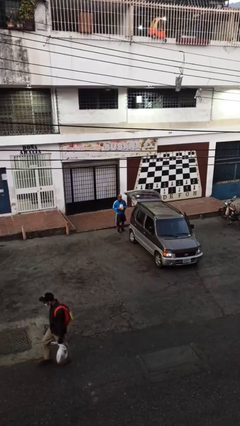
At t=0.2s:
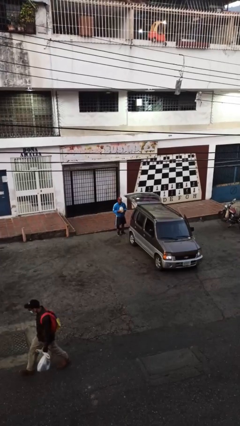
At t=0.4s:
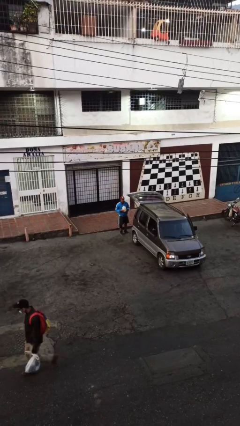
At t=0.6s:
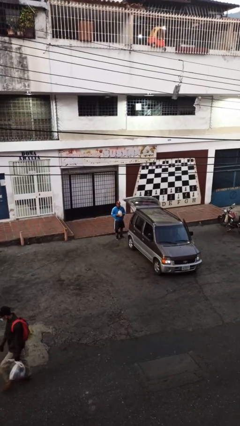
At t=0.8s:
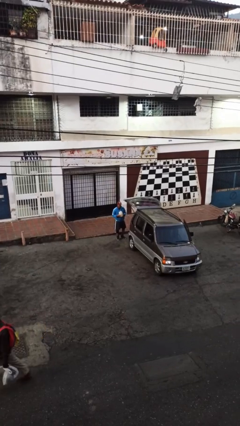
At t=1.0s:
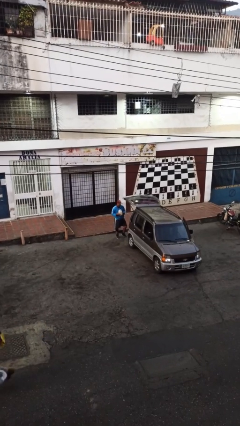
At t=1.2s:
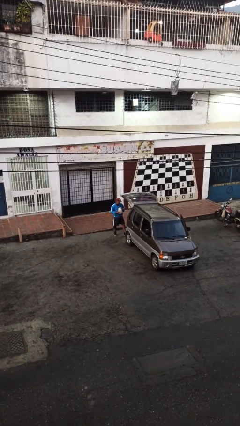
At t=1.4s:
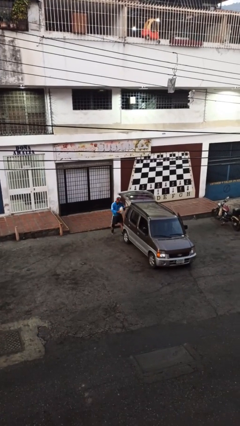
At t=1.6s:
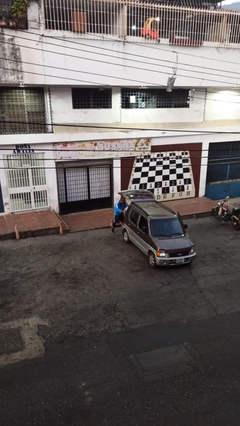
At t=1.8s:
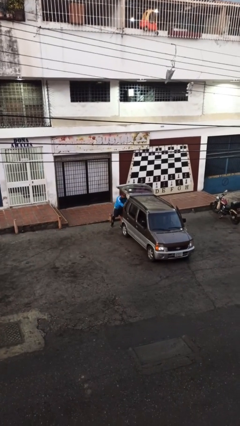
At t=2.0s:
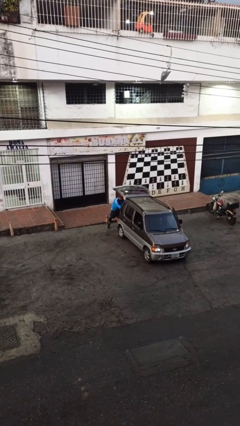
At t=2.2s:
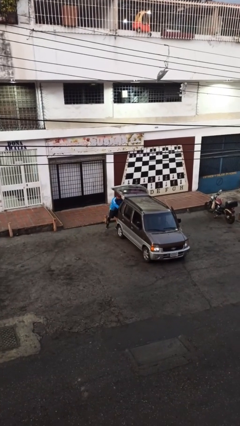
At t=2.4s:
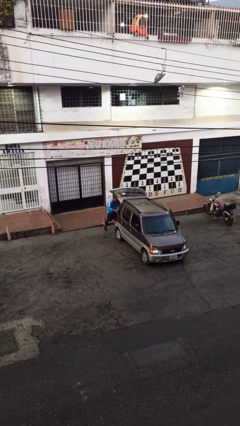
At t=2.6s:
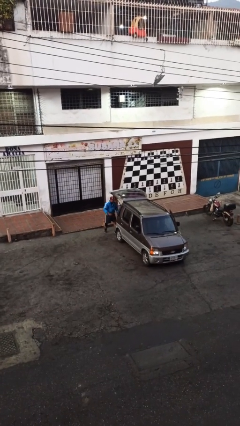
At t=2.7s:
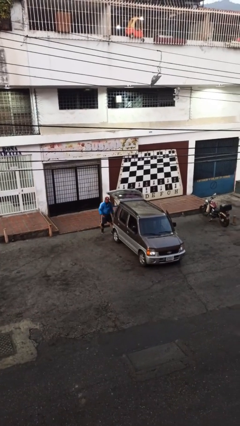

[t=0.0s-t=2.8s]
person loads car

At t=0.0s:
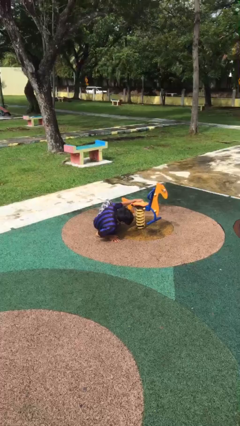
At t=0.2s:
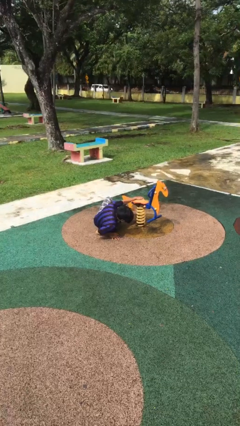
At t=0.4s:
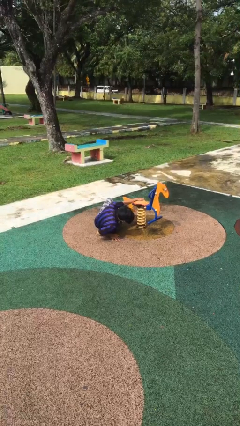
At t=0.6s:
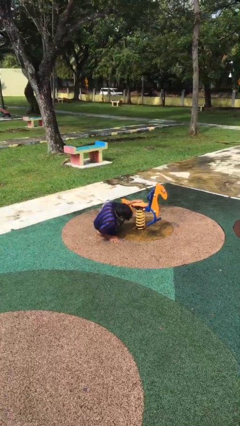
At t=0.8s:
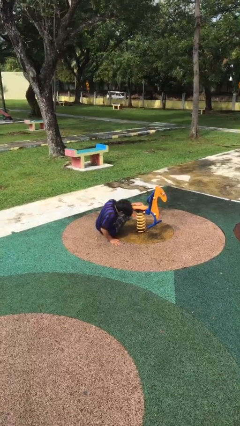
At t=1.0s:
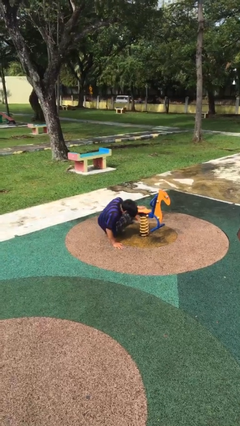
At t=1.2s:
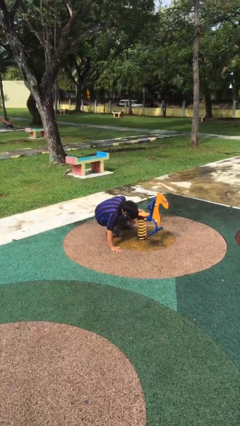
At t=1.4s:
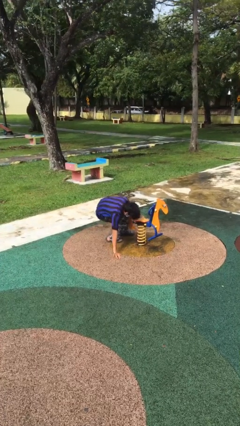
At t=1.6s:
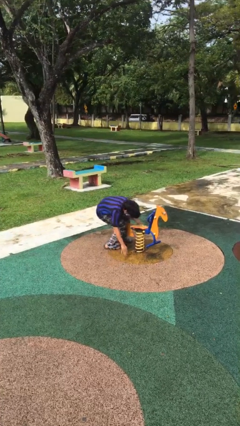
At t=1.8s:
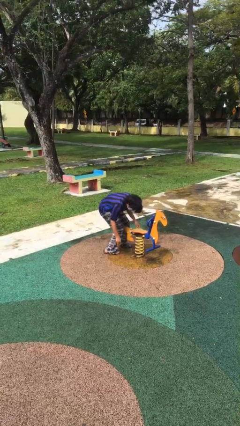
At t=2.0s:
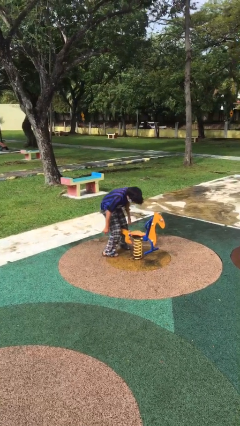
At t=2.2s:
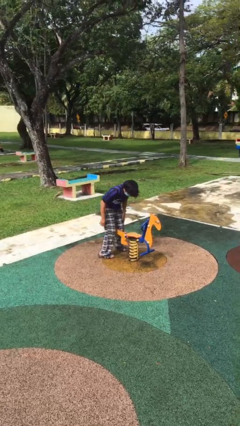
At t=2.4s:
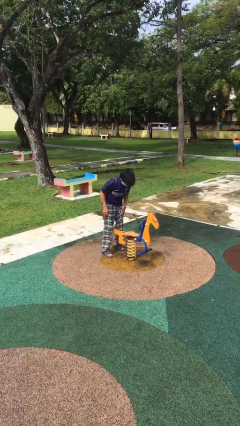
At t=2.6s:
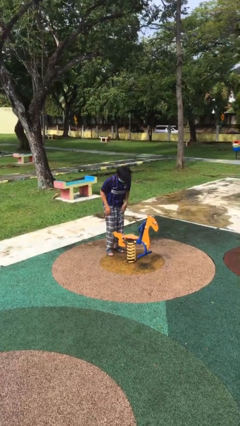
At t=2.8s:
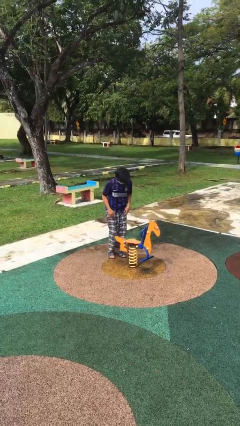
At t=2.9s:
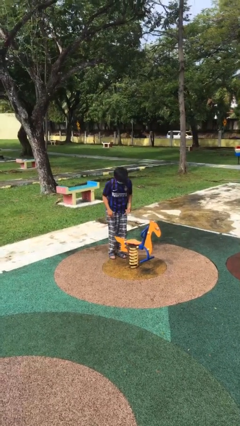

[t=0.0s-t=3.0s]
person stands up from floor

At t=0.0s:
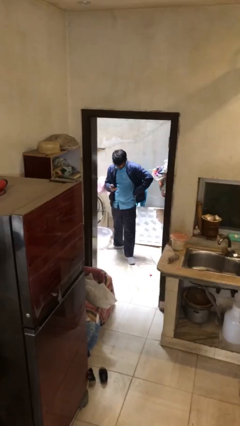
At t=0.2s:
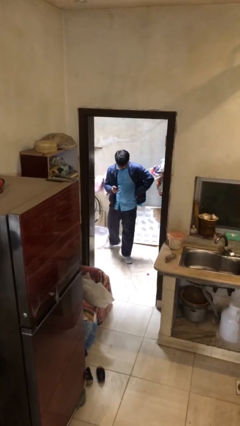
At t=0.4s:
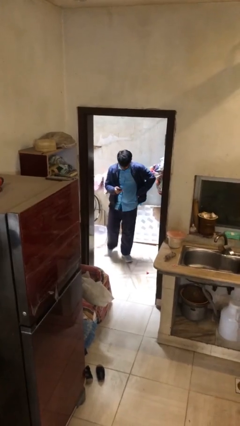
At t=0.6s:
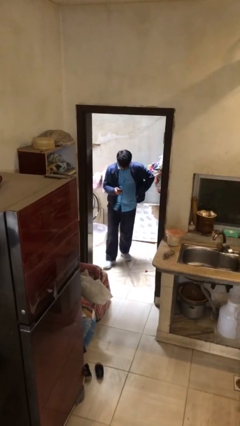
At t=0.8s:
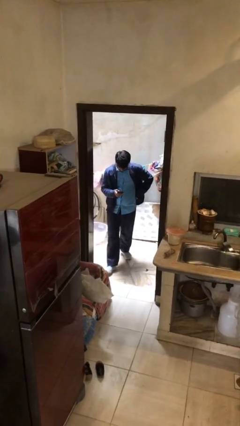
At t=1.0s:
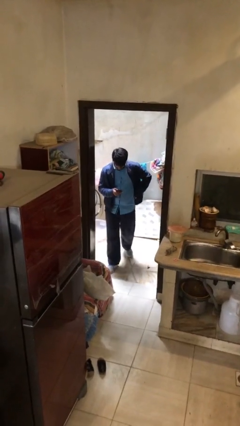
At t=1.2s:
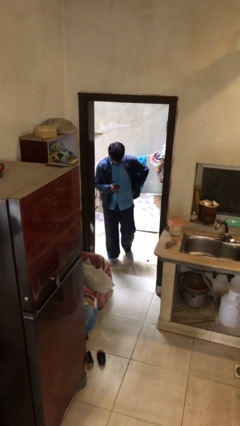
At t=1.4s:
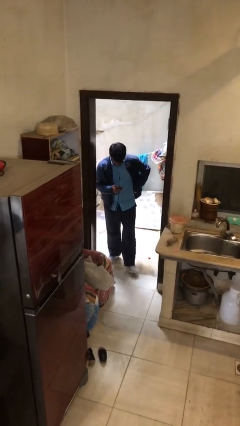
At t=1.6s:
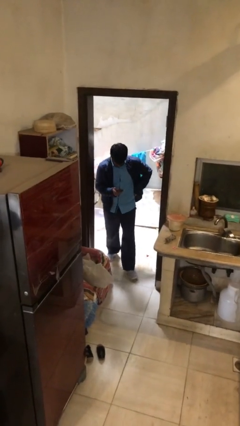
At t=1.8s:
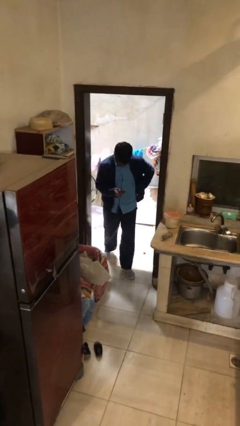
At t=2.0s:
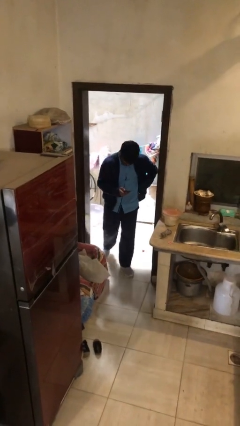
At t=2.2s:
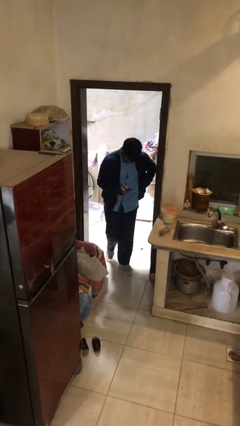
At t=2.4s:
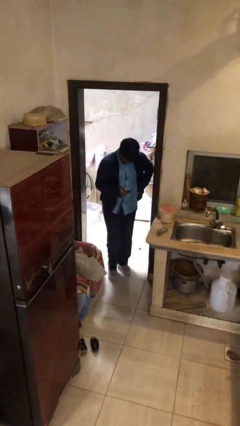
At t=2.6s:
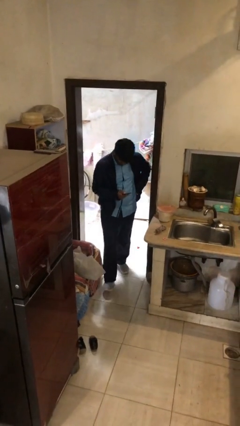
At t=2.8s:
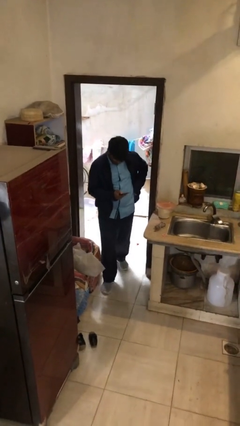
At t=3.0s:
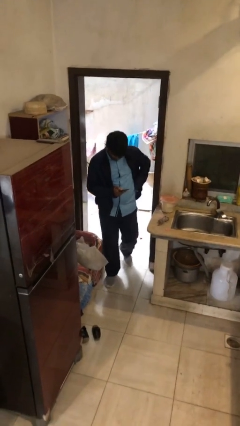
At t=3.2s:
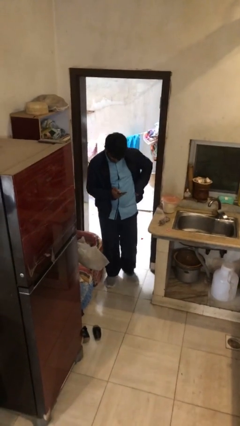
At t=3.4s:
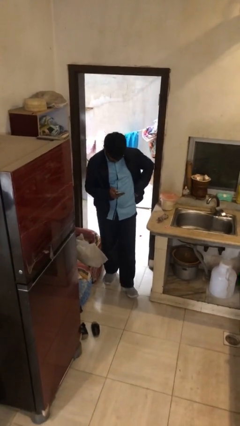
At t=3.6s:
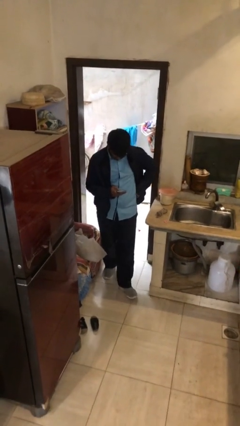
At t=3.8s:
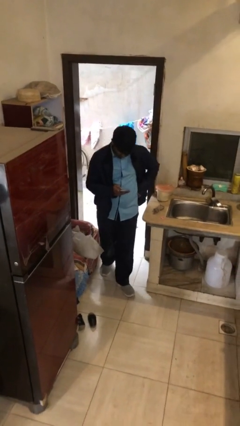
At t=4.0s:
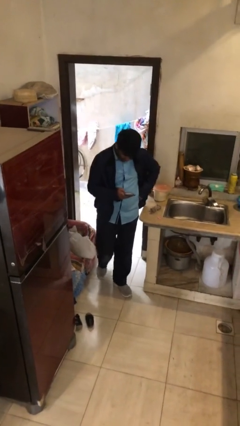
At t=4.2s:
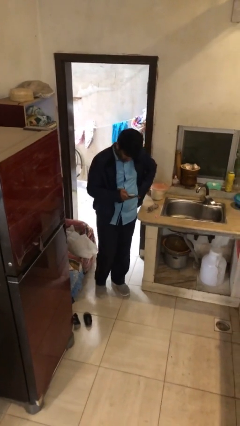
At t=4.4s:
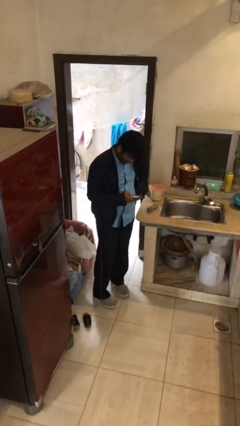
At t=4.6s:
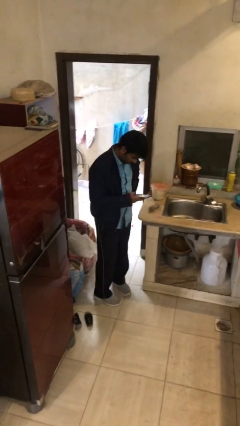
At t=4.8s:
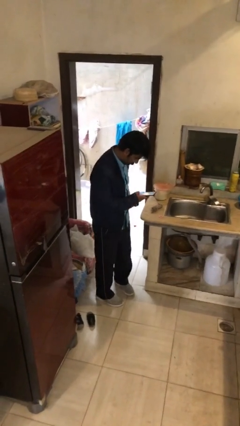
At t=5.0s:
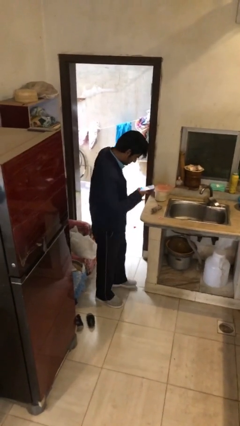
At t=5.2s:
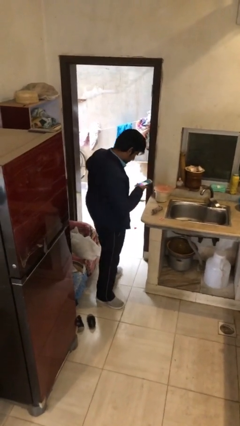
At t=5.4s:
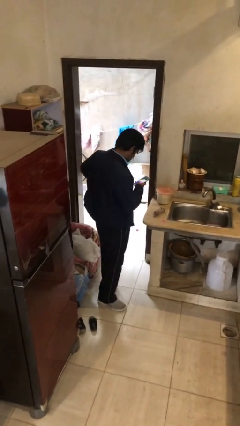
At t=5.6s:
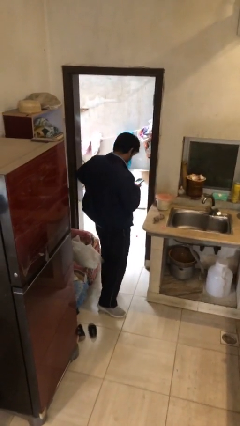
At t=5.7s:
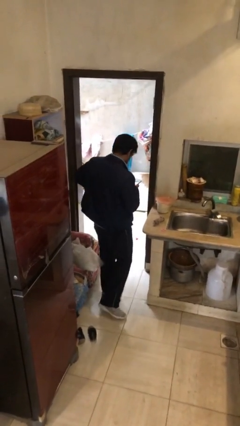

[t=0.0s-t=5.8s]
person enters scene through structure

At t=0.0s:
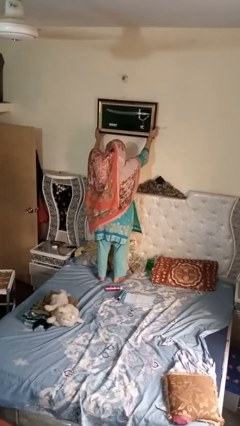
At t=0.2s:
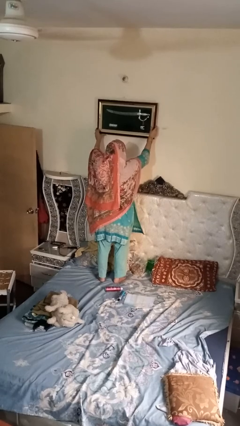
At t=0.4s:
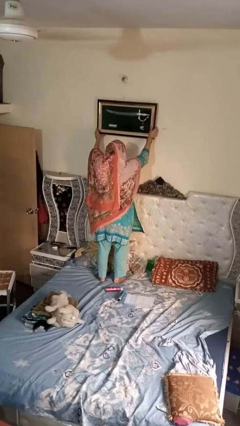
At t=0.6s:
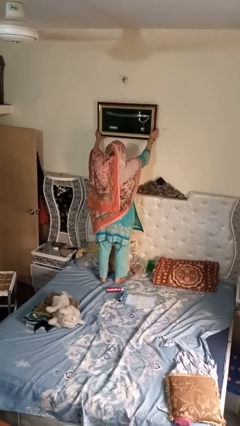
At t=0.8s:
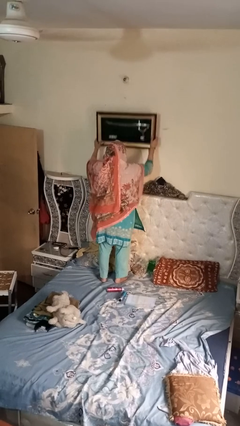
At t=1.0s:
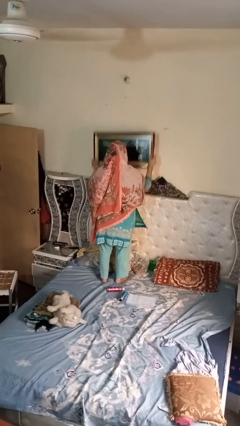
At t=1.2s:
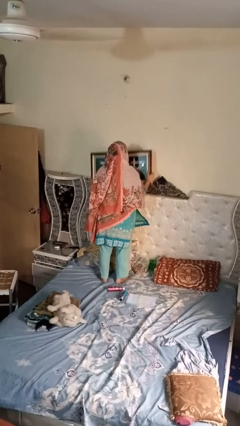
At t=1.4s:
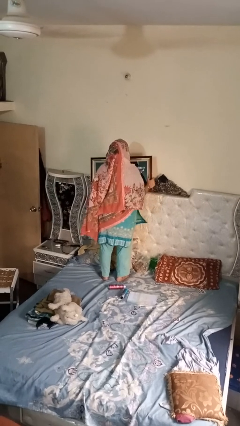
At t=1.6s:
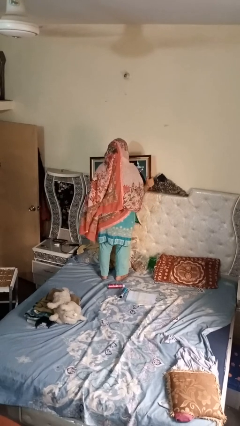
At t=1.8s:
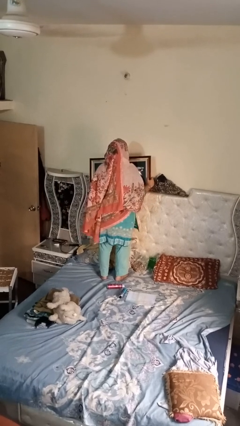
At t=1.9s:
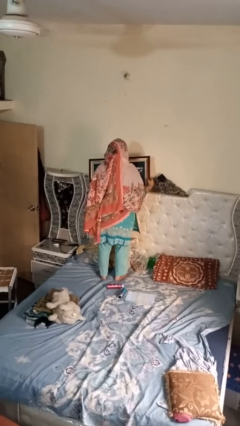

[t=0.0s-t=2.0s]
person puts up picture frame

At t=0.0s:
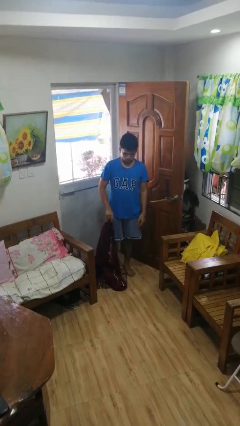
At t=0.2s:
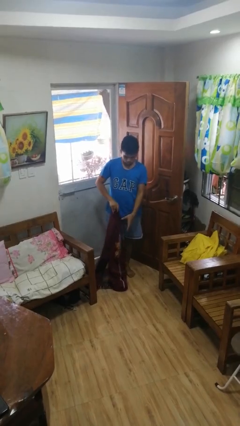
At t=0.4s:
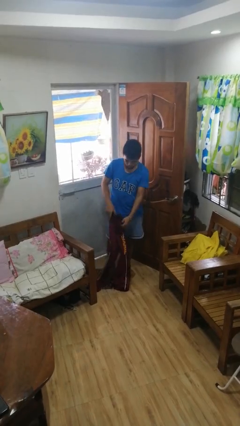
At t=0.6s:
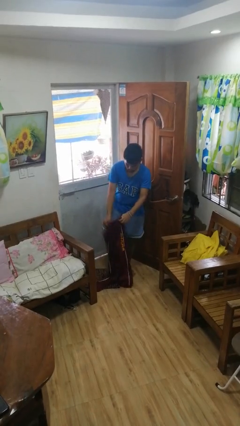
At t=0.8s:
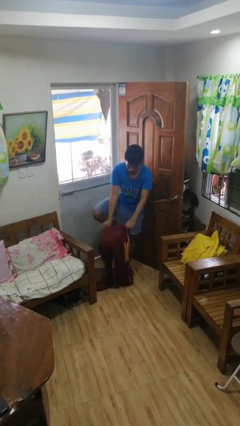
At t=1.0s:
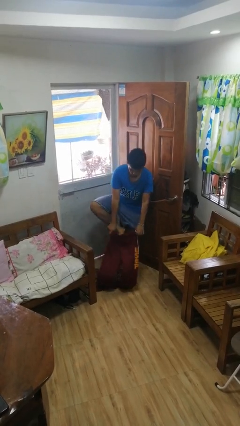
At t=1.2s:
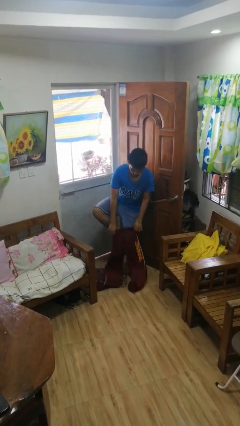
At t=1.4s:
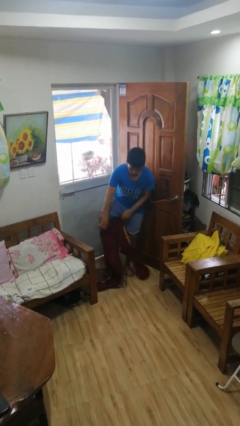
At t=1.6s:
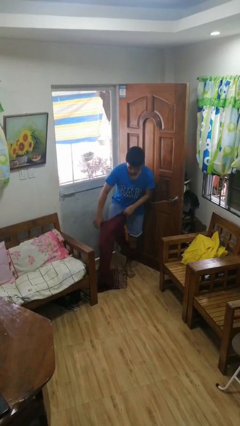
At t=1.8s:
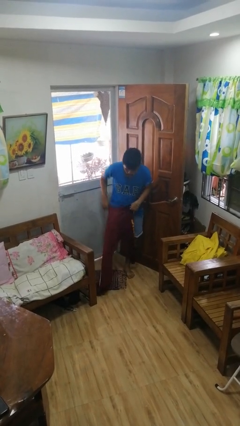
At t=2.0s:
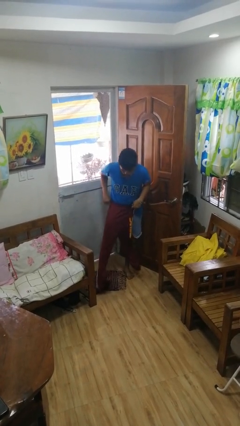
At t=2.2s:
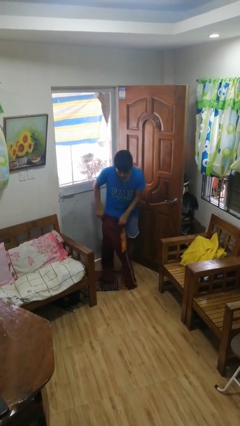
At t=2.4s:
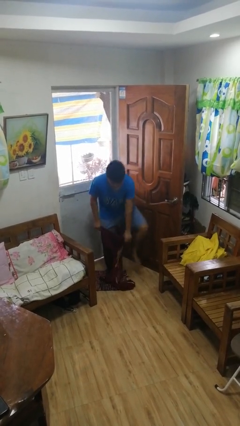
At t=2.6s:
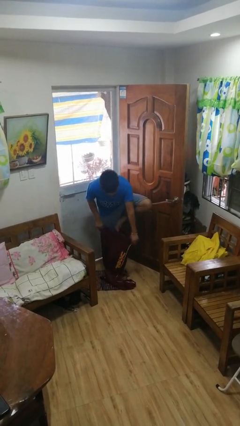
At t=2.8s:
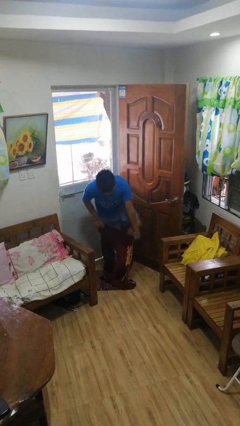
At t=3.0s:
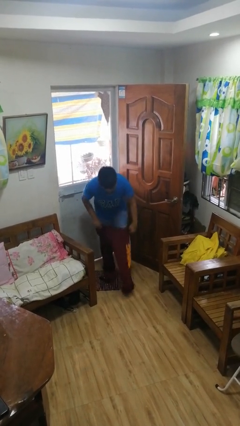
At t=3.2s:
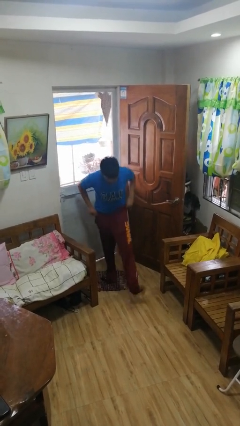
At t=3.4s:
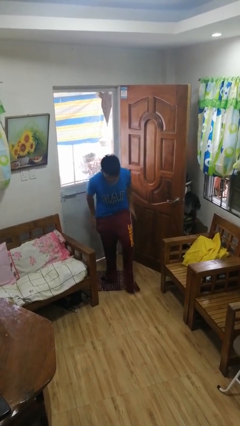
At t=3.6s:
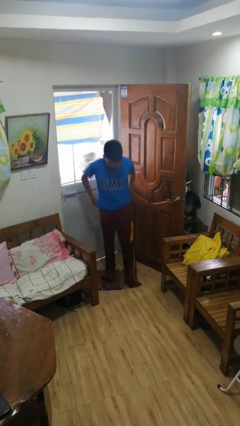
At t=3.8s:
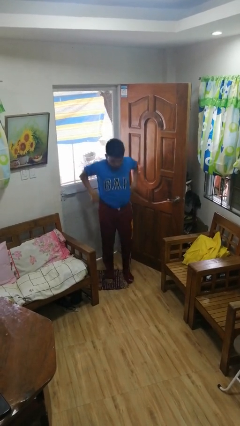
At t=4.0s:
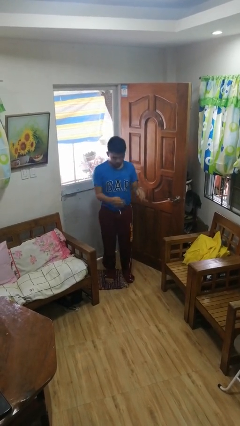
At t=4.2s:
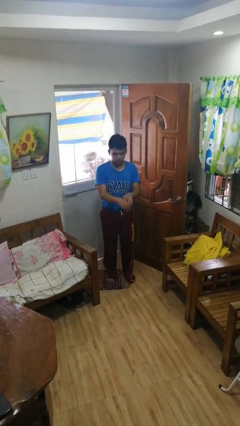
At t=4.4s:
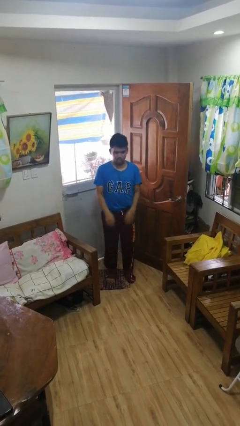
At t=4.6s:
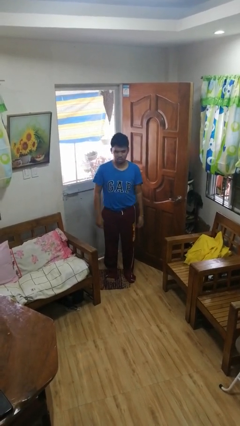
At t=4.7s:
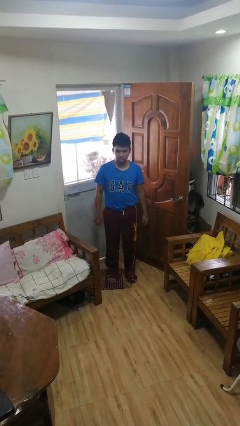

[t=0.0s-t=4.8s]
person puts on pants
